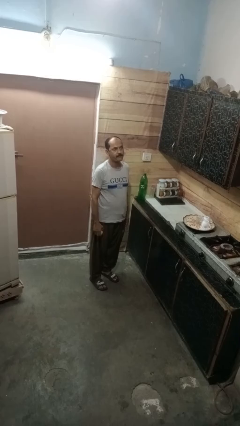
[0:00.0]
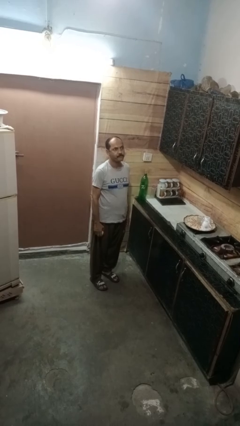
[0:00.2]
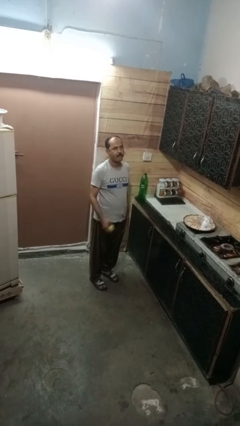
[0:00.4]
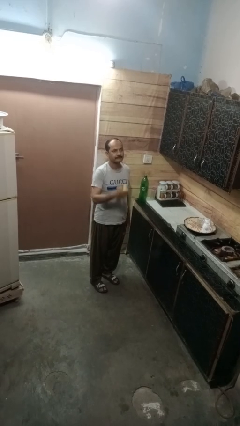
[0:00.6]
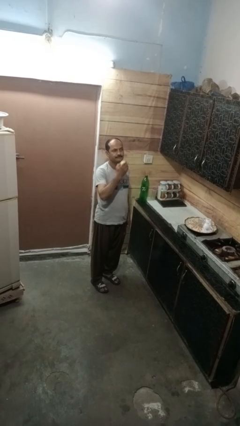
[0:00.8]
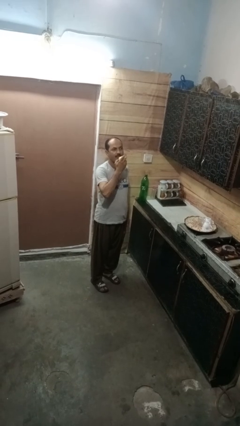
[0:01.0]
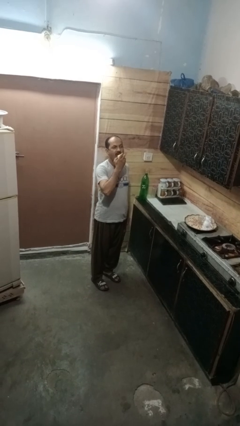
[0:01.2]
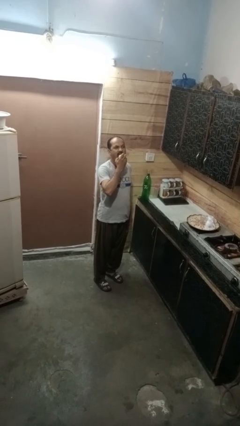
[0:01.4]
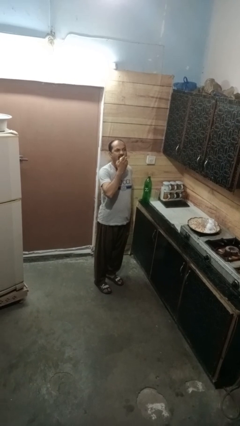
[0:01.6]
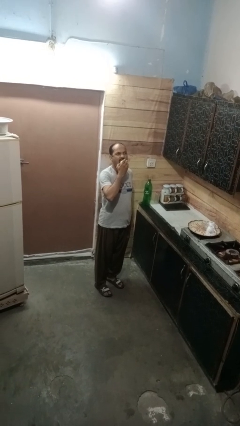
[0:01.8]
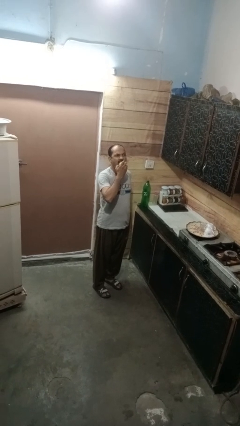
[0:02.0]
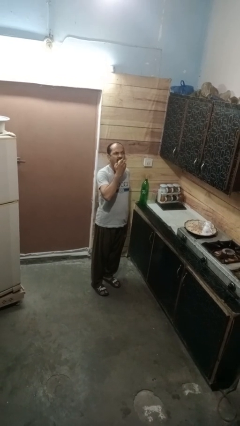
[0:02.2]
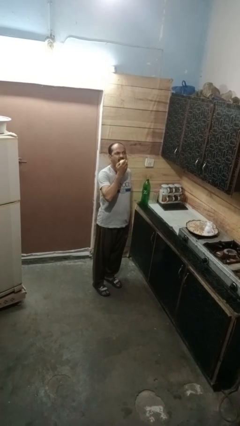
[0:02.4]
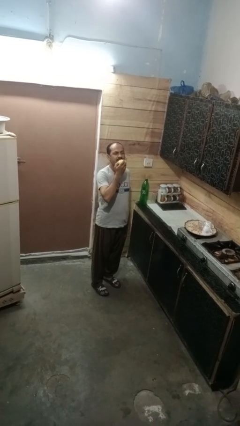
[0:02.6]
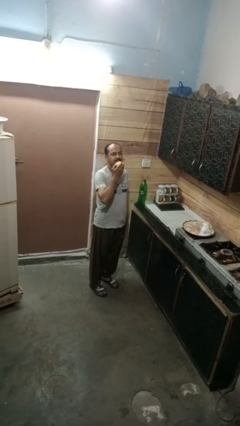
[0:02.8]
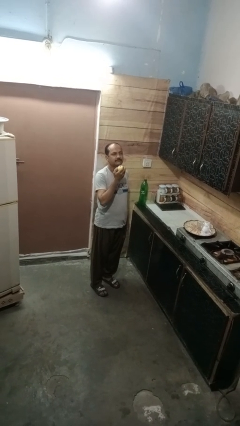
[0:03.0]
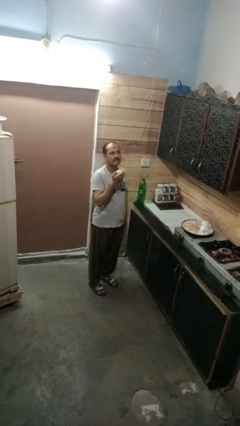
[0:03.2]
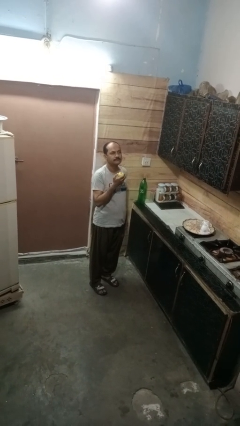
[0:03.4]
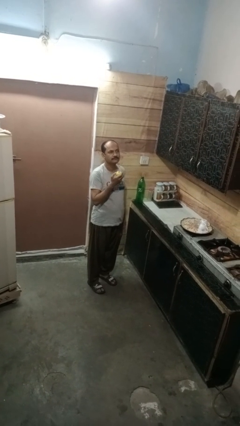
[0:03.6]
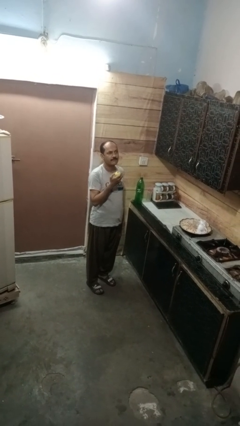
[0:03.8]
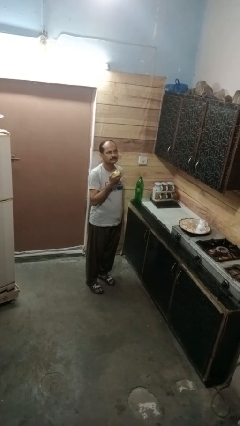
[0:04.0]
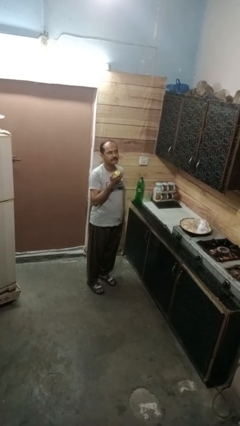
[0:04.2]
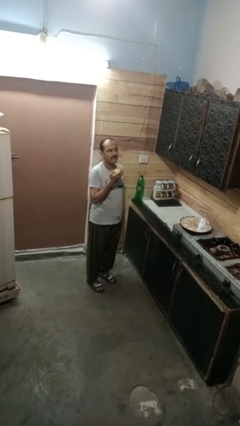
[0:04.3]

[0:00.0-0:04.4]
person eats apple

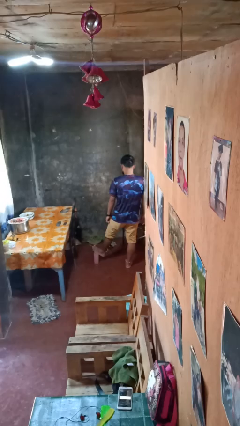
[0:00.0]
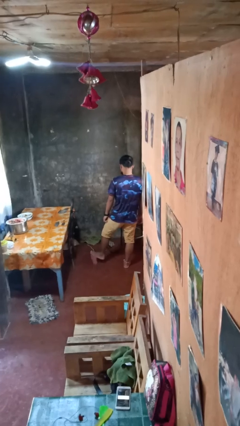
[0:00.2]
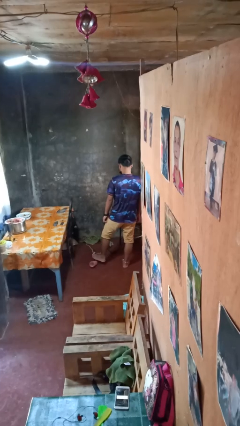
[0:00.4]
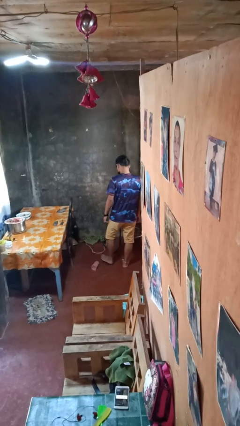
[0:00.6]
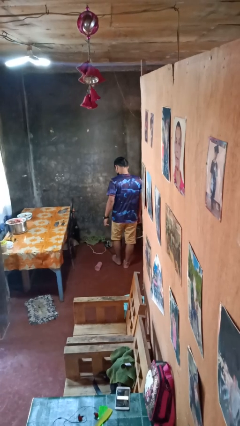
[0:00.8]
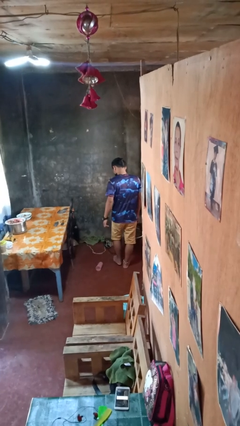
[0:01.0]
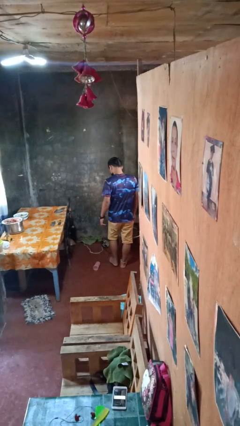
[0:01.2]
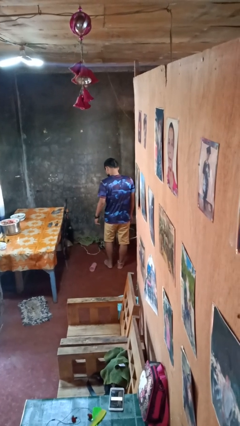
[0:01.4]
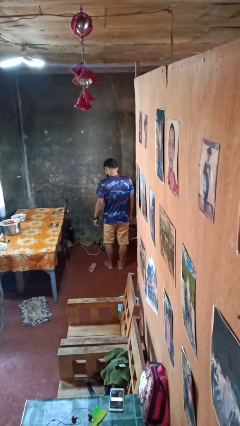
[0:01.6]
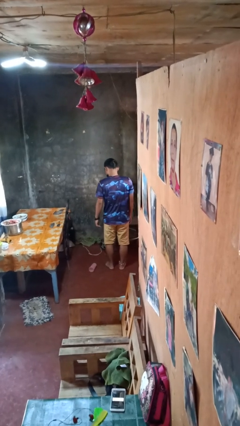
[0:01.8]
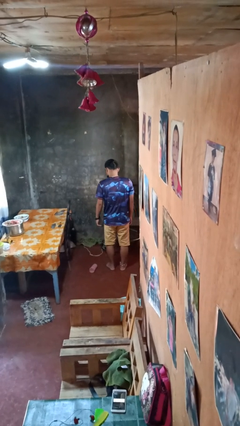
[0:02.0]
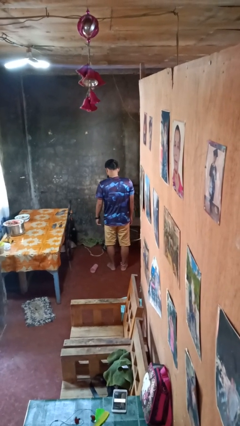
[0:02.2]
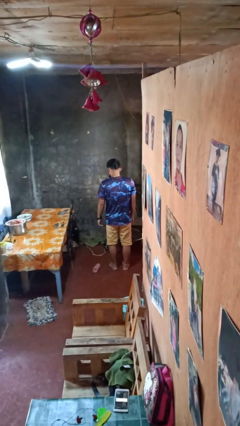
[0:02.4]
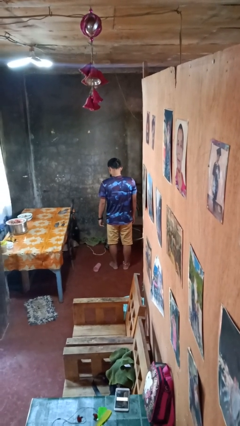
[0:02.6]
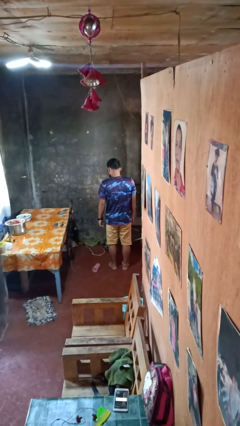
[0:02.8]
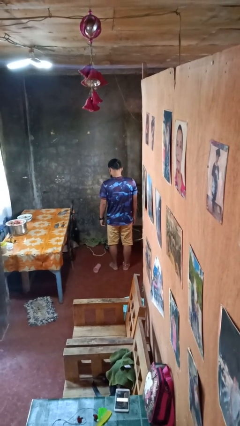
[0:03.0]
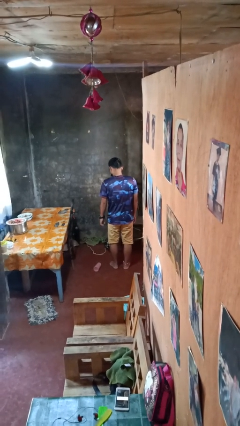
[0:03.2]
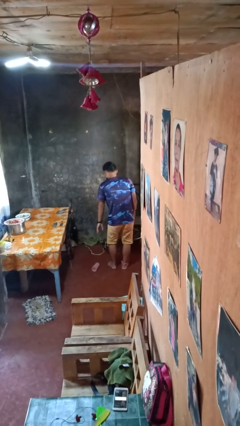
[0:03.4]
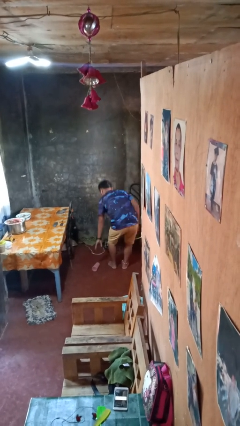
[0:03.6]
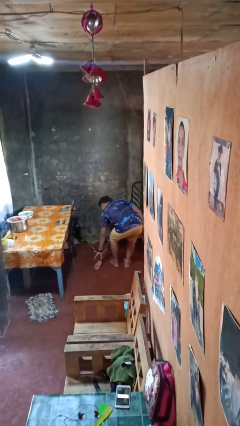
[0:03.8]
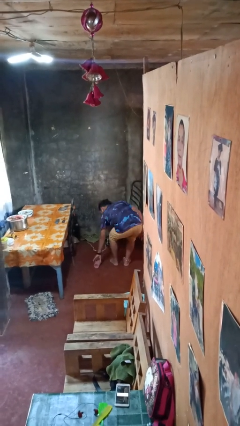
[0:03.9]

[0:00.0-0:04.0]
person spills on floor

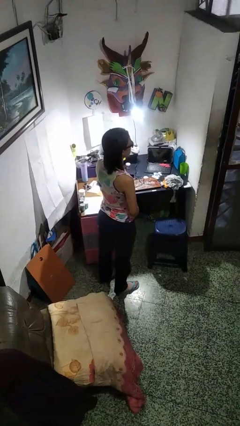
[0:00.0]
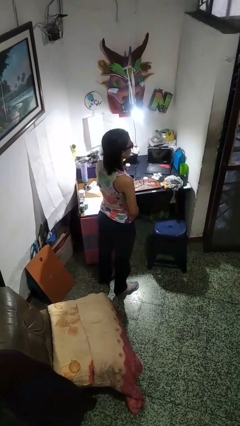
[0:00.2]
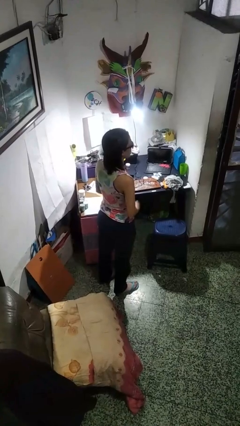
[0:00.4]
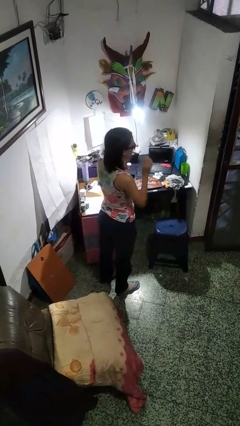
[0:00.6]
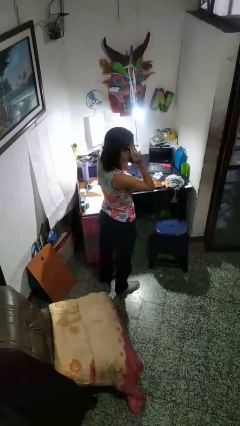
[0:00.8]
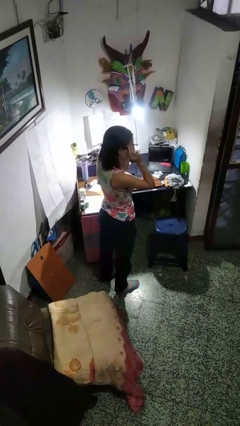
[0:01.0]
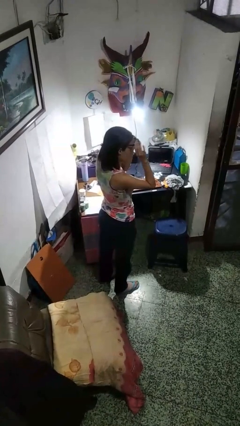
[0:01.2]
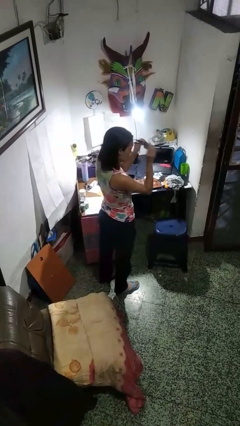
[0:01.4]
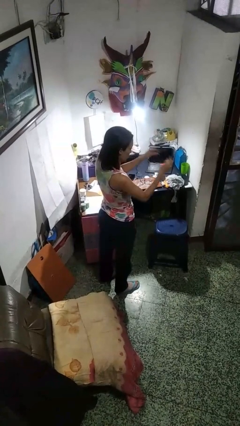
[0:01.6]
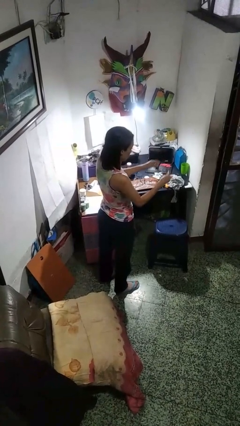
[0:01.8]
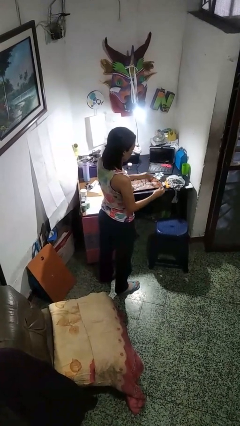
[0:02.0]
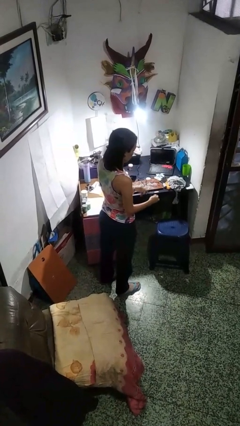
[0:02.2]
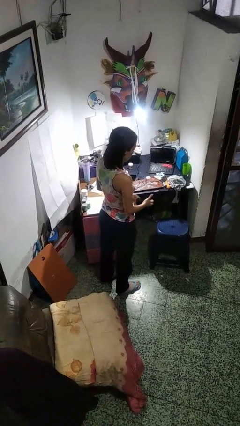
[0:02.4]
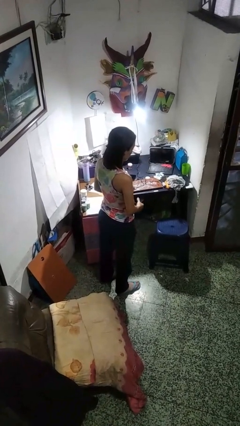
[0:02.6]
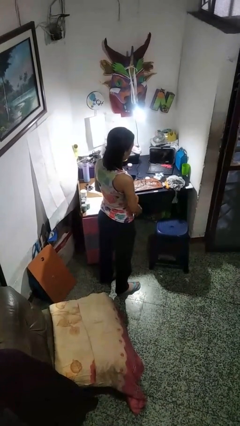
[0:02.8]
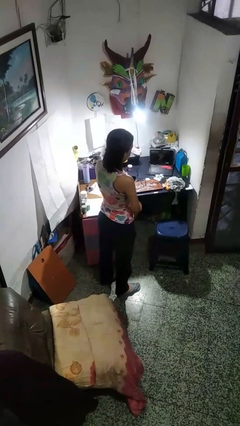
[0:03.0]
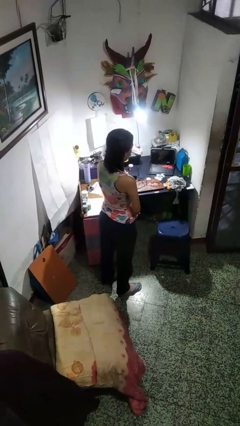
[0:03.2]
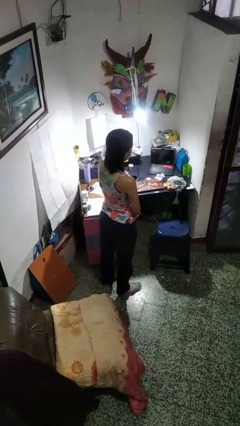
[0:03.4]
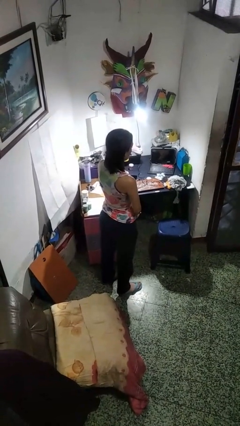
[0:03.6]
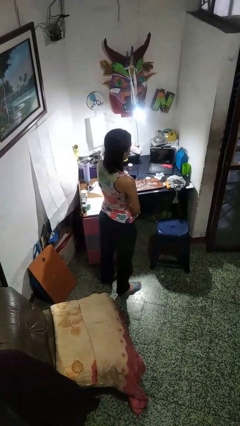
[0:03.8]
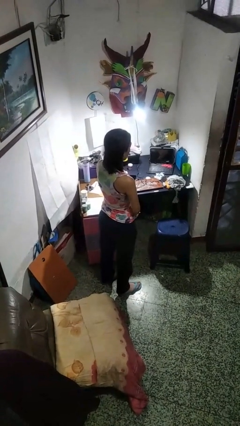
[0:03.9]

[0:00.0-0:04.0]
person takes off sunglasses

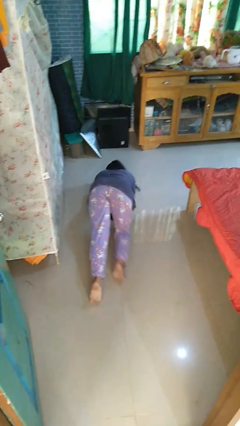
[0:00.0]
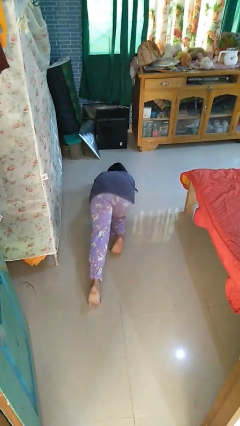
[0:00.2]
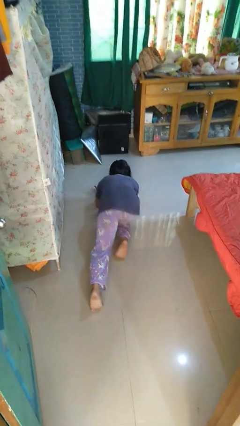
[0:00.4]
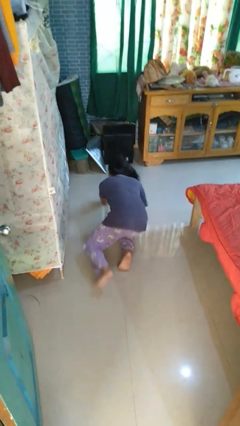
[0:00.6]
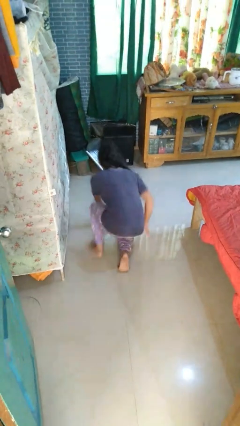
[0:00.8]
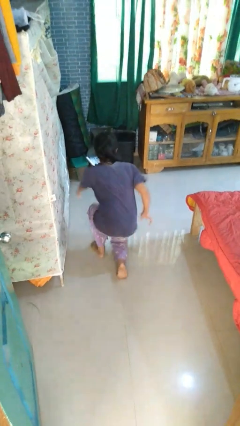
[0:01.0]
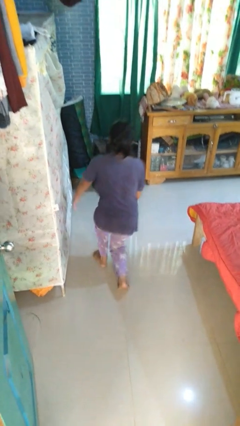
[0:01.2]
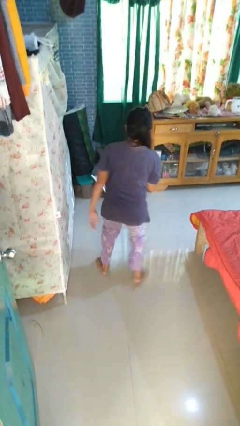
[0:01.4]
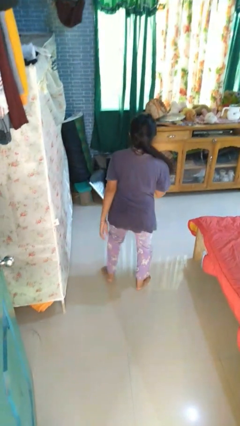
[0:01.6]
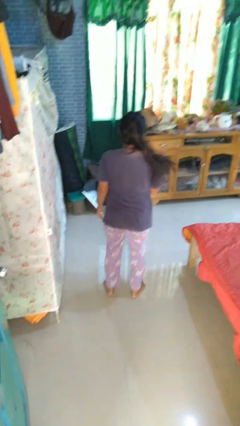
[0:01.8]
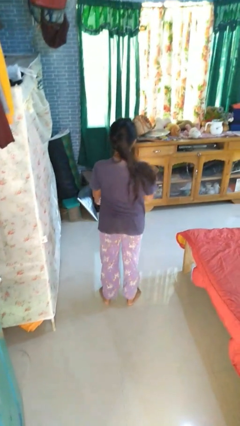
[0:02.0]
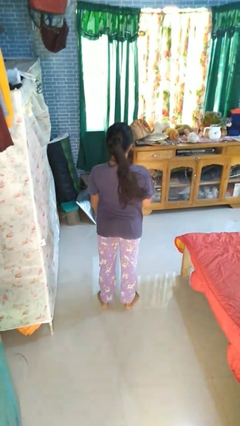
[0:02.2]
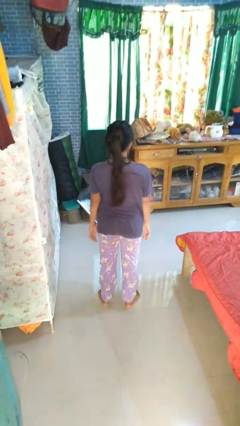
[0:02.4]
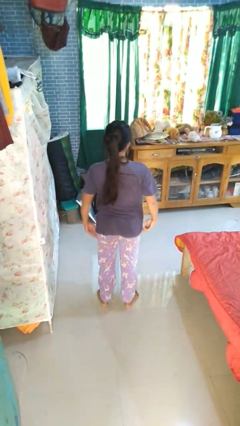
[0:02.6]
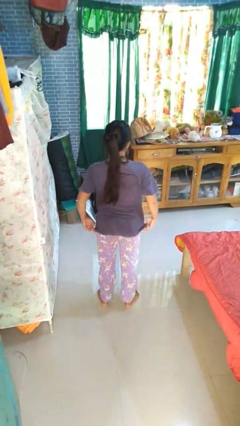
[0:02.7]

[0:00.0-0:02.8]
person stands up from floor

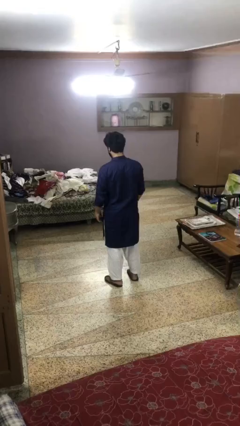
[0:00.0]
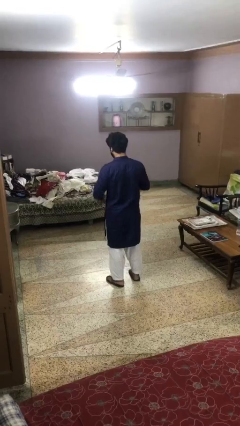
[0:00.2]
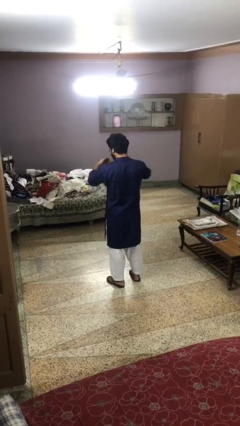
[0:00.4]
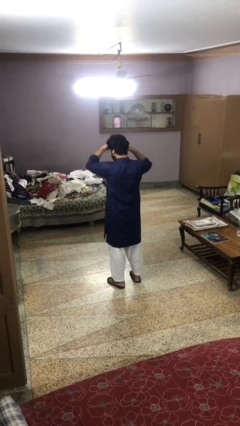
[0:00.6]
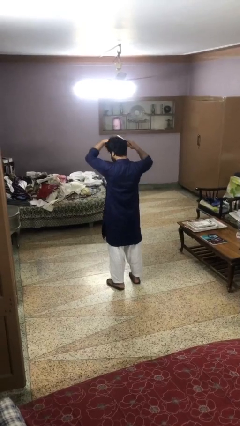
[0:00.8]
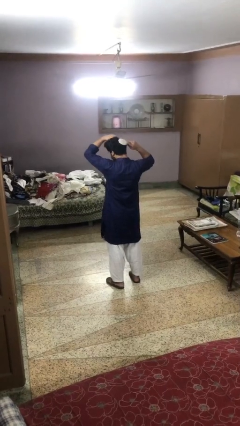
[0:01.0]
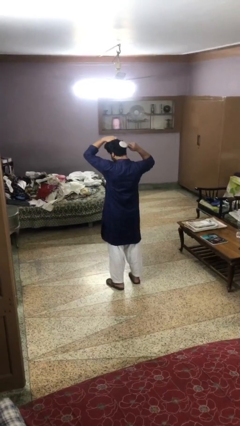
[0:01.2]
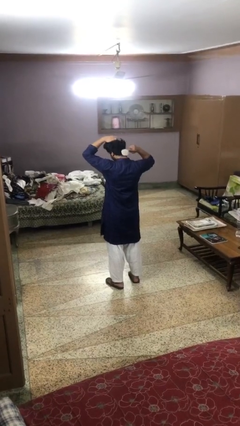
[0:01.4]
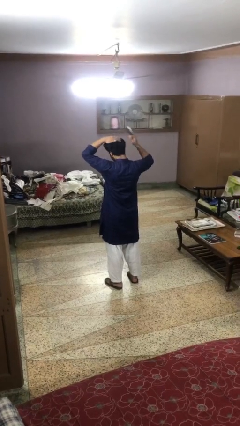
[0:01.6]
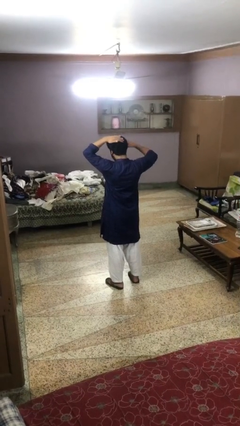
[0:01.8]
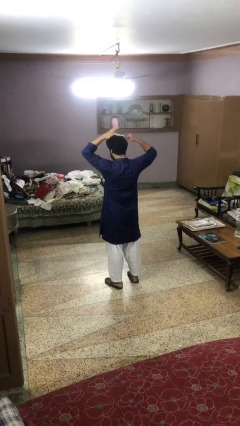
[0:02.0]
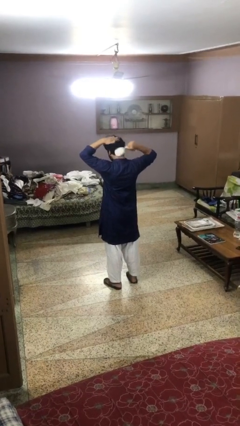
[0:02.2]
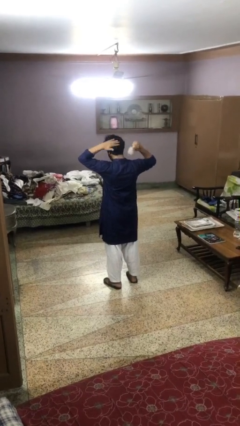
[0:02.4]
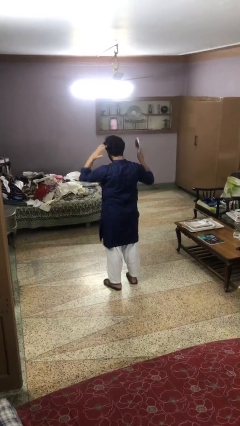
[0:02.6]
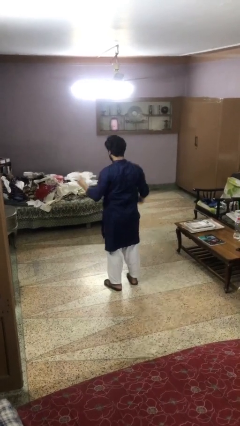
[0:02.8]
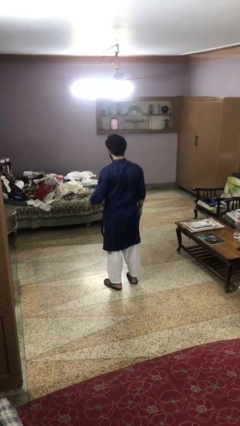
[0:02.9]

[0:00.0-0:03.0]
person brushes hair
